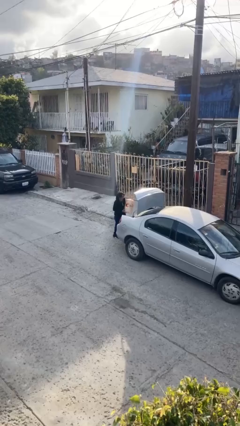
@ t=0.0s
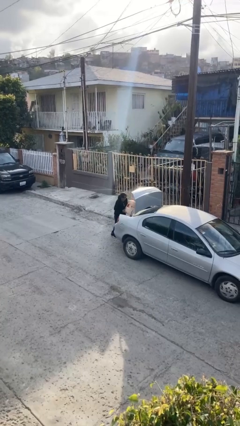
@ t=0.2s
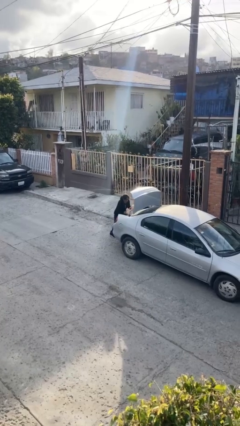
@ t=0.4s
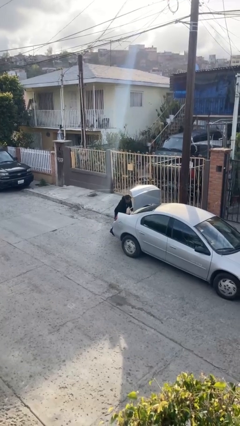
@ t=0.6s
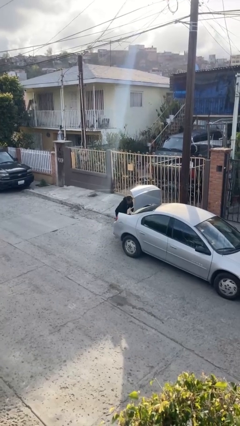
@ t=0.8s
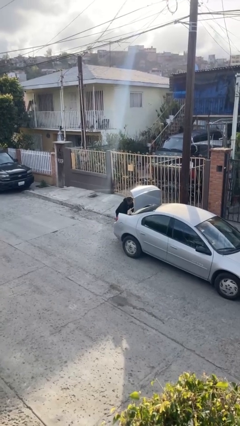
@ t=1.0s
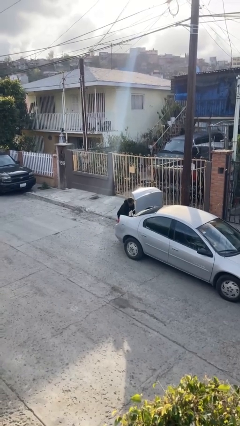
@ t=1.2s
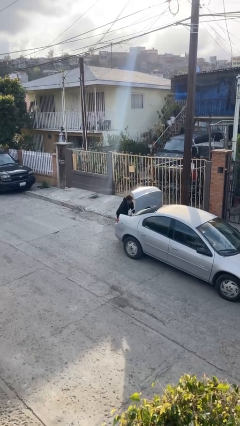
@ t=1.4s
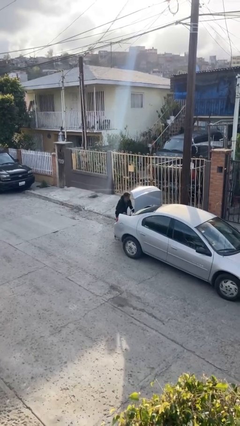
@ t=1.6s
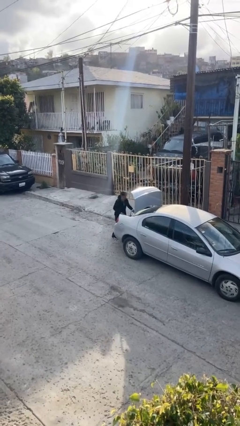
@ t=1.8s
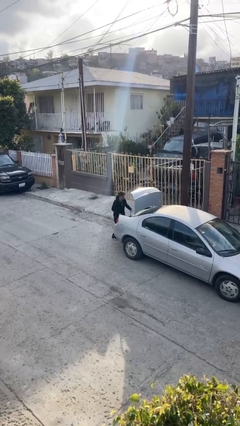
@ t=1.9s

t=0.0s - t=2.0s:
person loads car

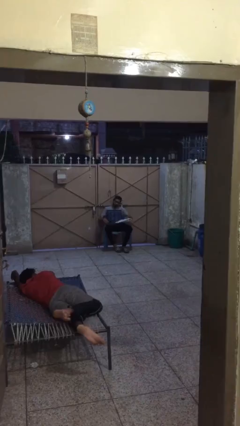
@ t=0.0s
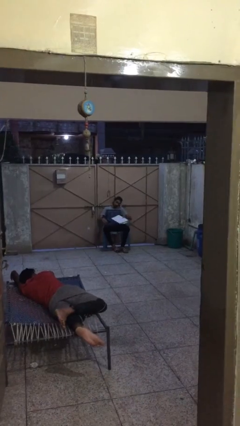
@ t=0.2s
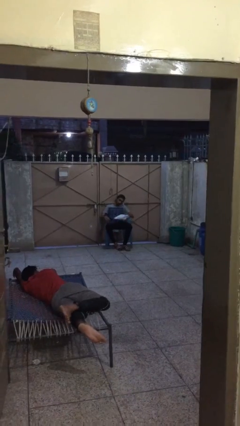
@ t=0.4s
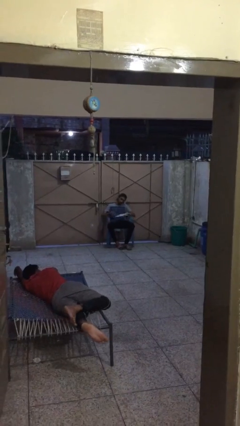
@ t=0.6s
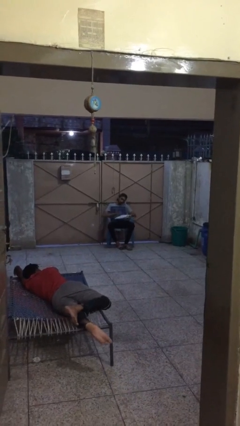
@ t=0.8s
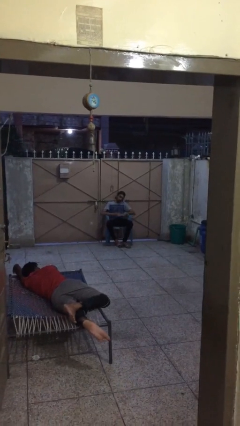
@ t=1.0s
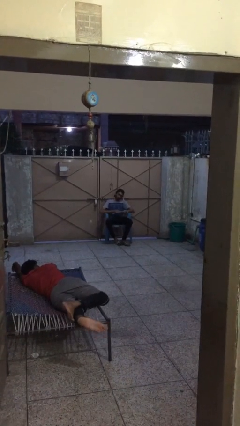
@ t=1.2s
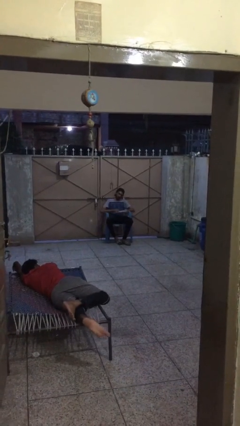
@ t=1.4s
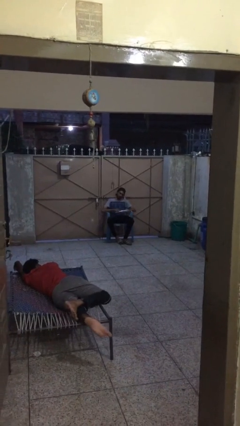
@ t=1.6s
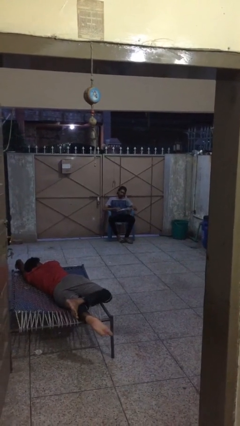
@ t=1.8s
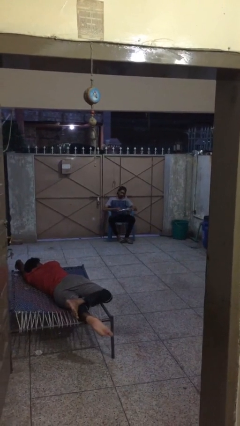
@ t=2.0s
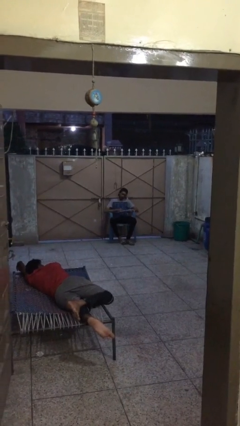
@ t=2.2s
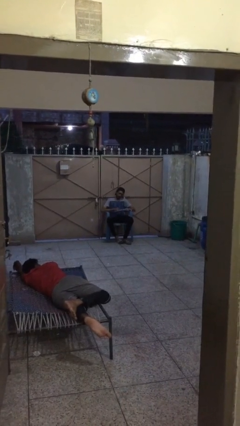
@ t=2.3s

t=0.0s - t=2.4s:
person reads document

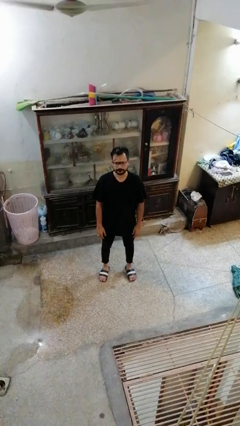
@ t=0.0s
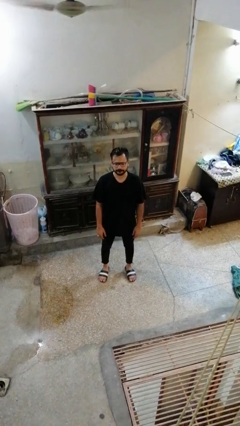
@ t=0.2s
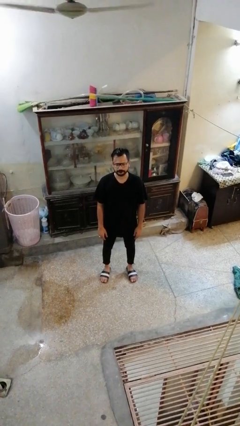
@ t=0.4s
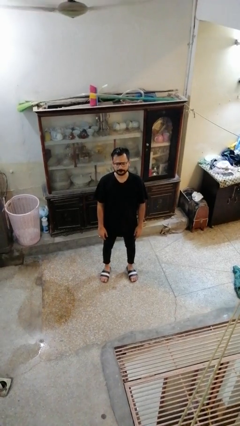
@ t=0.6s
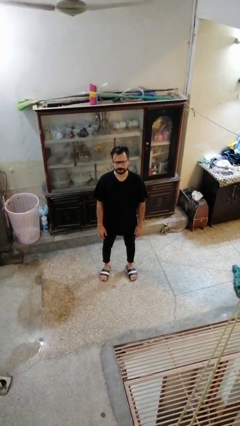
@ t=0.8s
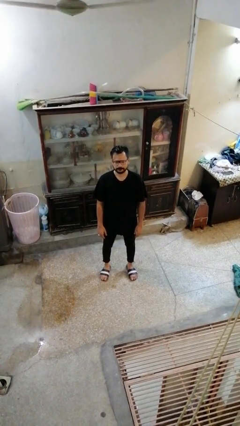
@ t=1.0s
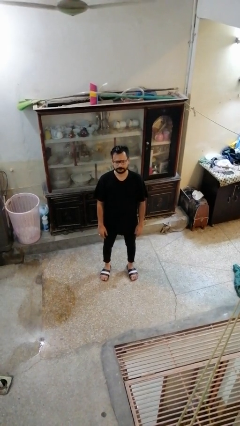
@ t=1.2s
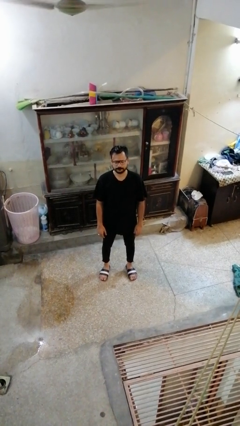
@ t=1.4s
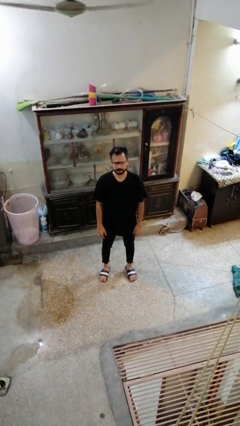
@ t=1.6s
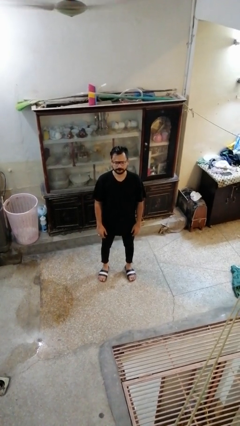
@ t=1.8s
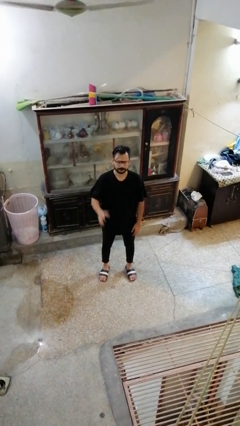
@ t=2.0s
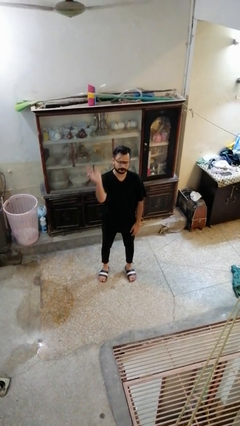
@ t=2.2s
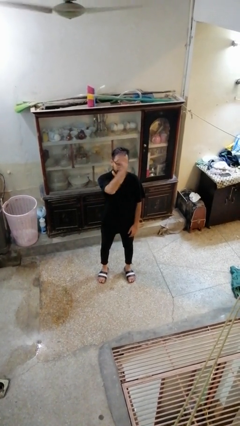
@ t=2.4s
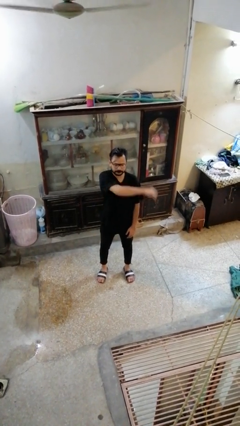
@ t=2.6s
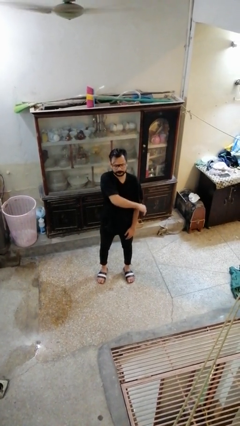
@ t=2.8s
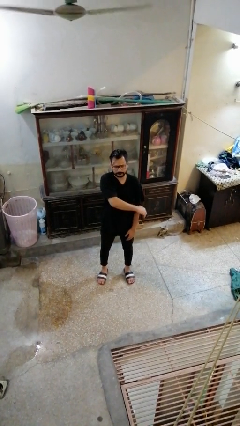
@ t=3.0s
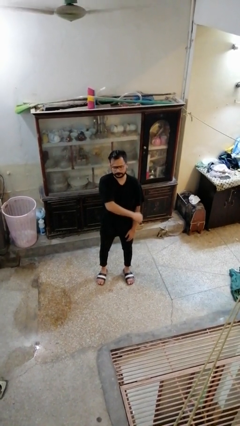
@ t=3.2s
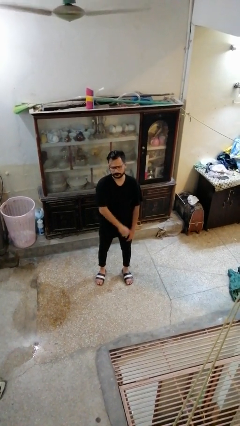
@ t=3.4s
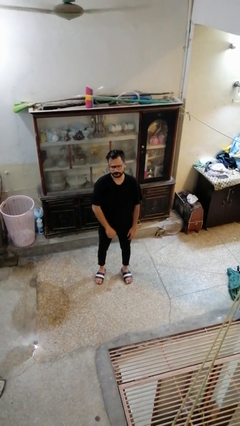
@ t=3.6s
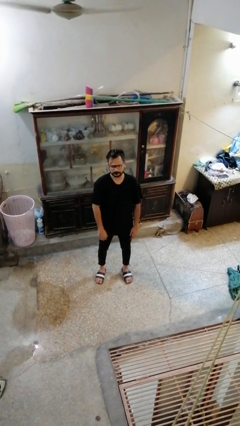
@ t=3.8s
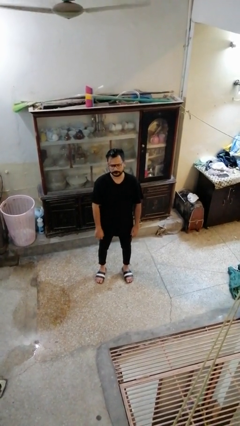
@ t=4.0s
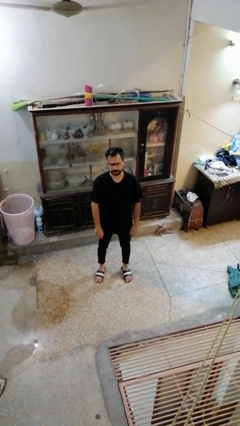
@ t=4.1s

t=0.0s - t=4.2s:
person gestures swipe left

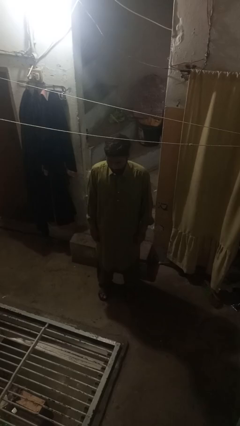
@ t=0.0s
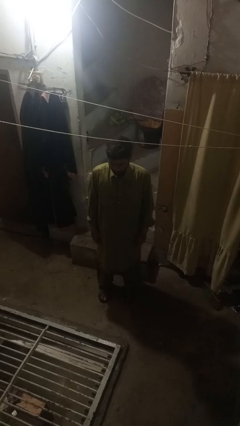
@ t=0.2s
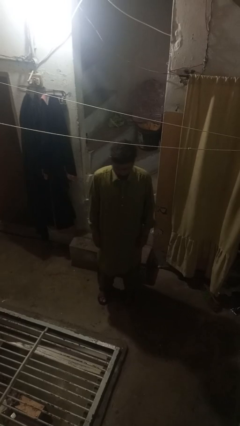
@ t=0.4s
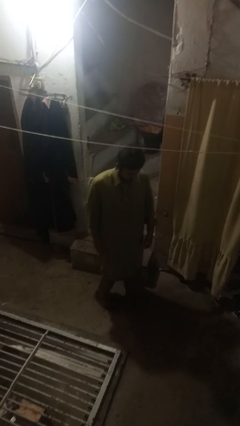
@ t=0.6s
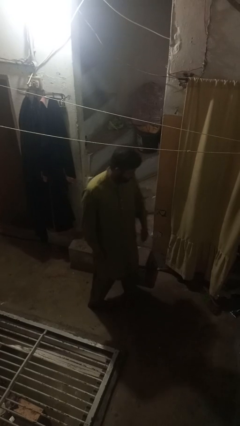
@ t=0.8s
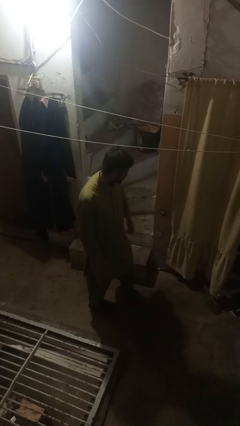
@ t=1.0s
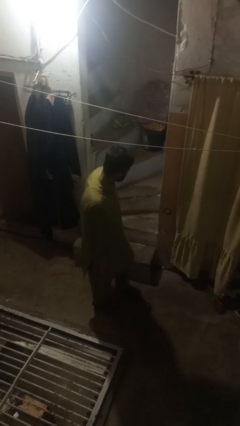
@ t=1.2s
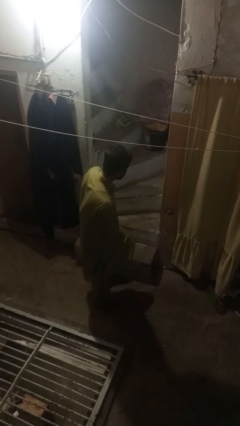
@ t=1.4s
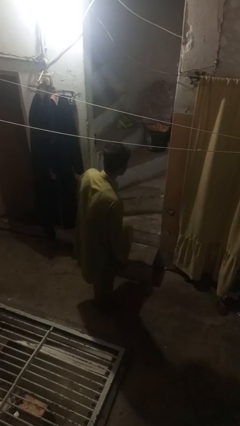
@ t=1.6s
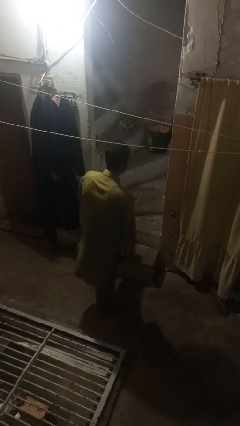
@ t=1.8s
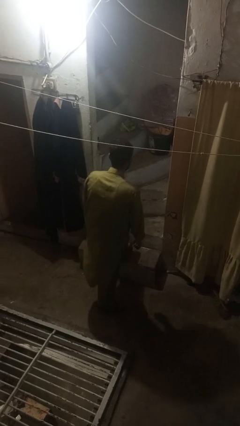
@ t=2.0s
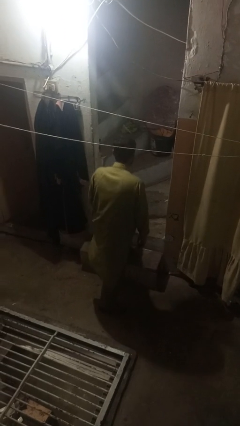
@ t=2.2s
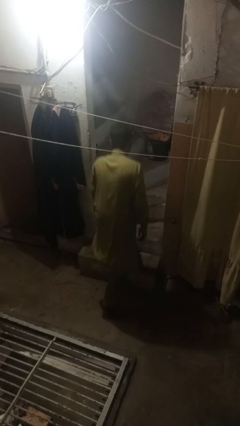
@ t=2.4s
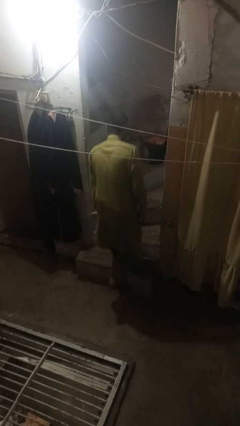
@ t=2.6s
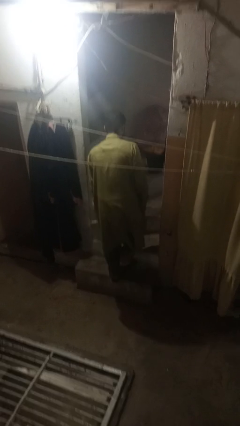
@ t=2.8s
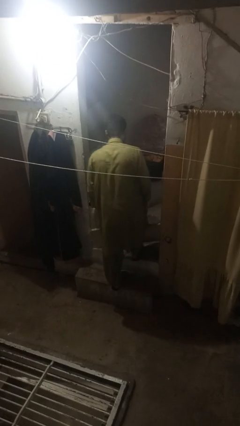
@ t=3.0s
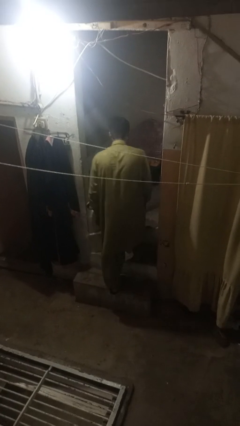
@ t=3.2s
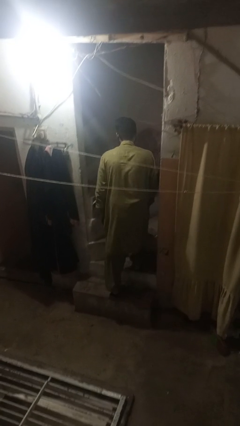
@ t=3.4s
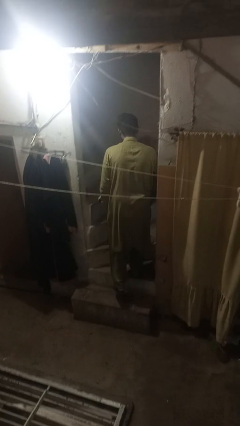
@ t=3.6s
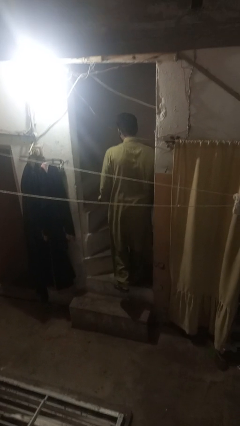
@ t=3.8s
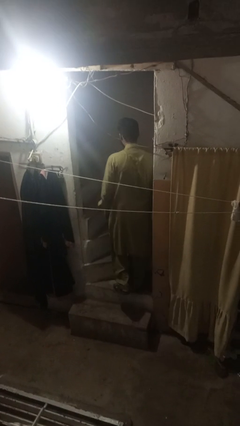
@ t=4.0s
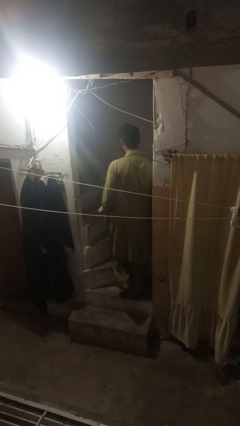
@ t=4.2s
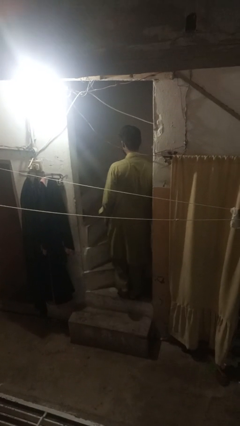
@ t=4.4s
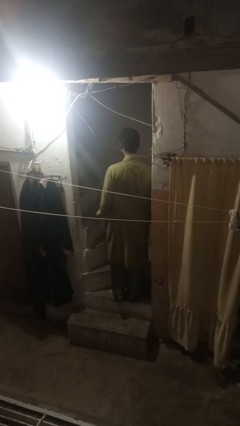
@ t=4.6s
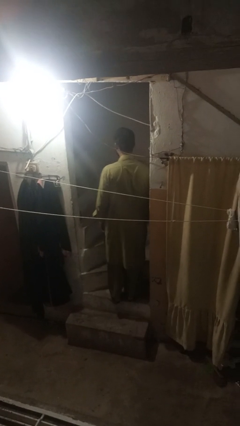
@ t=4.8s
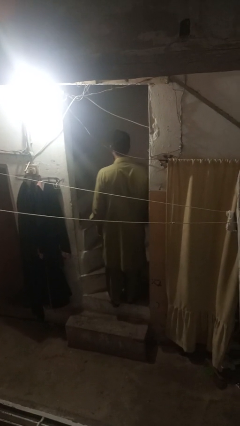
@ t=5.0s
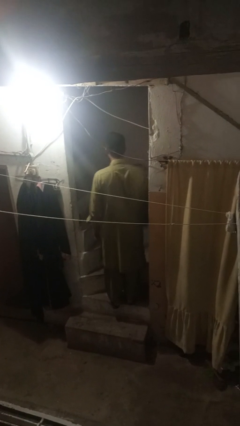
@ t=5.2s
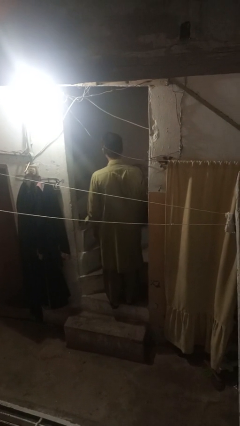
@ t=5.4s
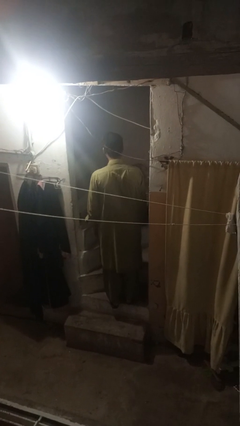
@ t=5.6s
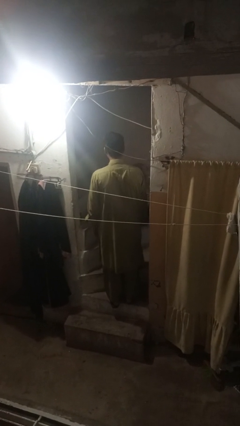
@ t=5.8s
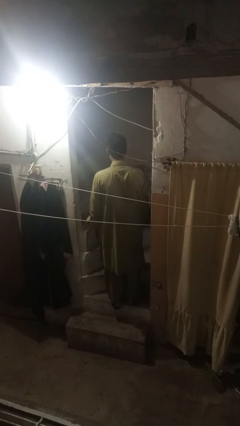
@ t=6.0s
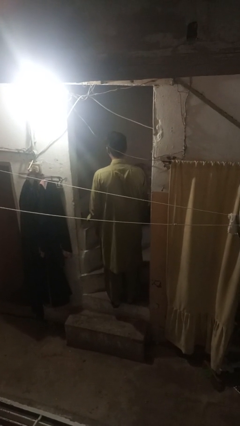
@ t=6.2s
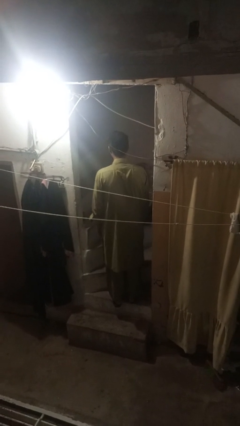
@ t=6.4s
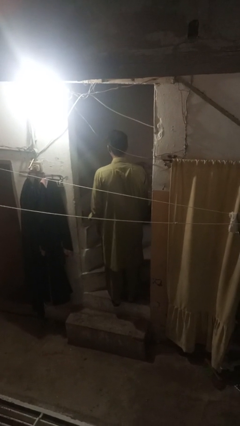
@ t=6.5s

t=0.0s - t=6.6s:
person climbs up stairs

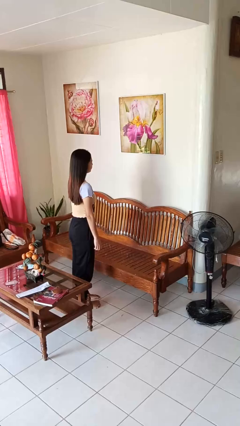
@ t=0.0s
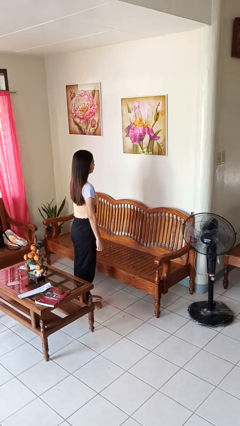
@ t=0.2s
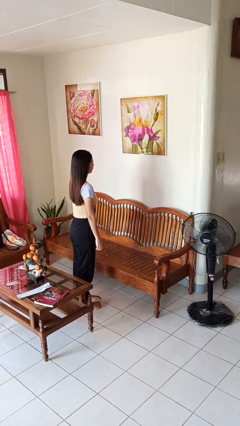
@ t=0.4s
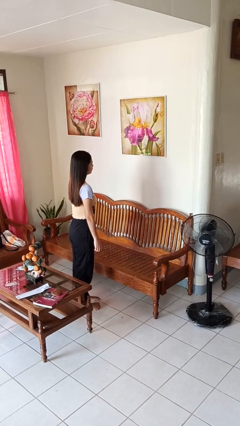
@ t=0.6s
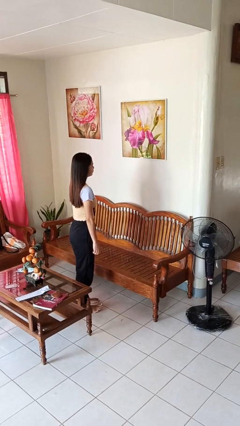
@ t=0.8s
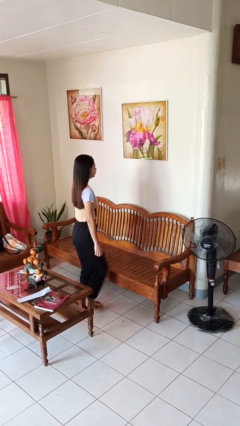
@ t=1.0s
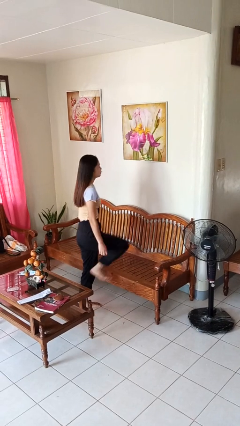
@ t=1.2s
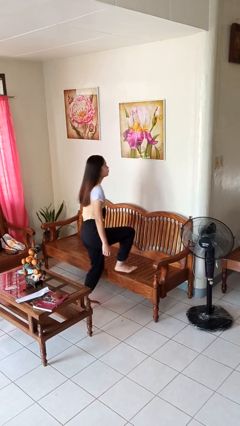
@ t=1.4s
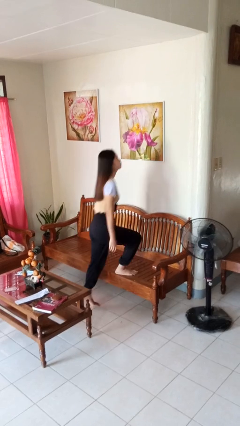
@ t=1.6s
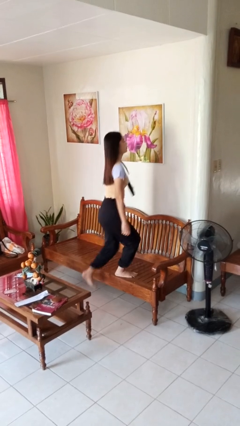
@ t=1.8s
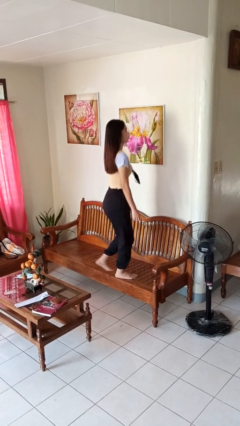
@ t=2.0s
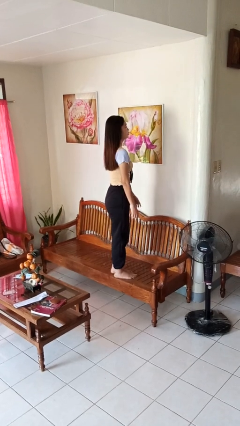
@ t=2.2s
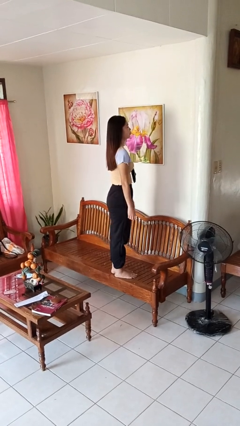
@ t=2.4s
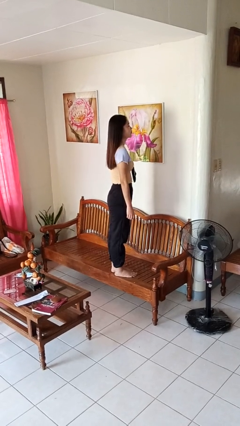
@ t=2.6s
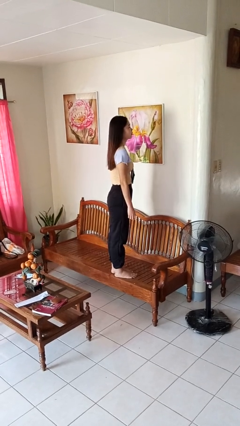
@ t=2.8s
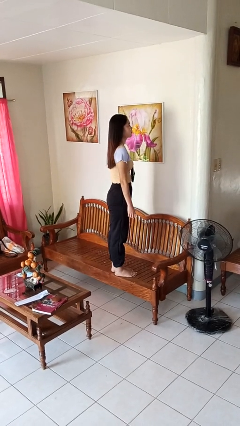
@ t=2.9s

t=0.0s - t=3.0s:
person climbs on chair
